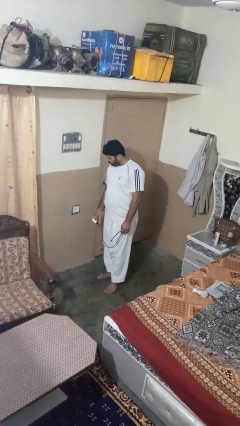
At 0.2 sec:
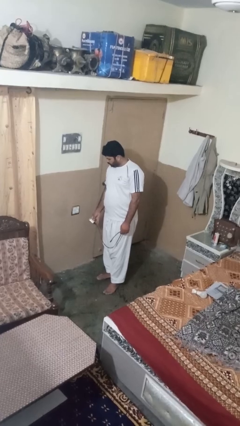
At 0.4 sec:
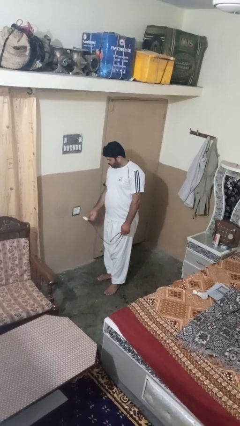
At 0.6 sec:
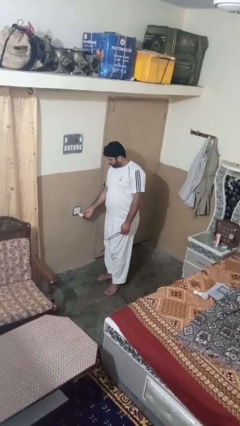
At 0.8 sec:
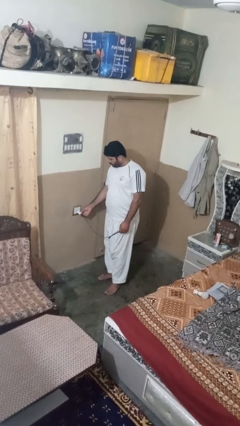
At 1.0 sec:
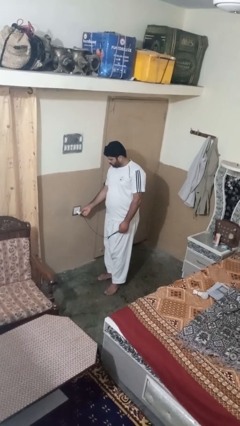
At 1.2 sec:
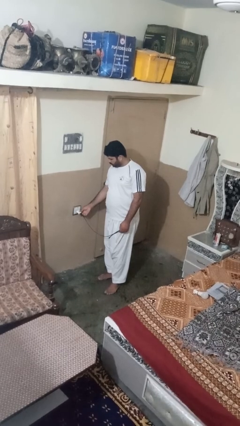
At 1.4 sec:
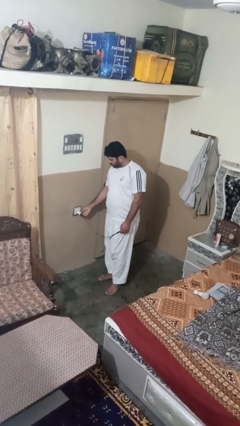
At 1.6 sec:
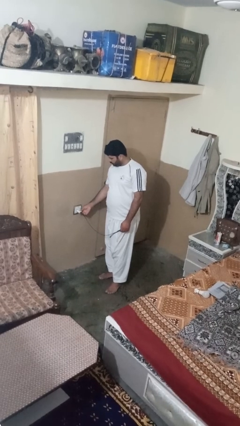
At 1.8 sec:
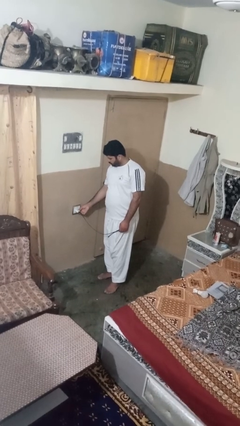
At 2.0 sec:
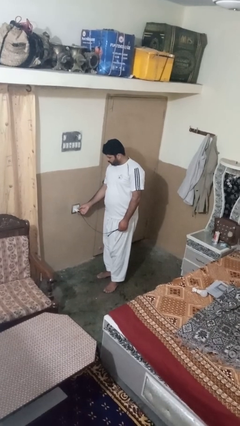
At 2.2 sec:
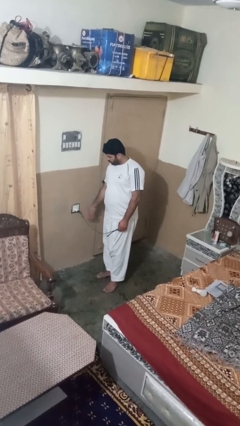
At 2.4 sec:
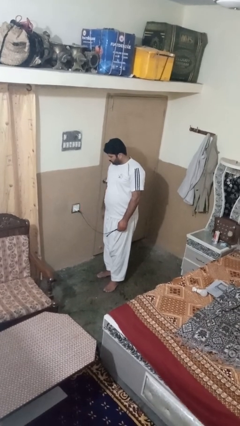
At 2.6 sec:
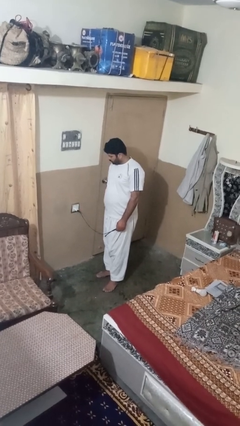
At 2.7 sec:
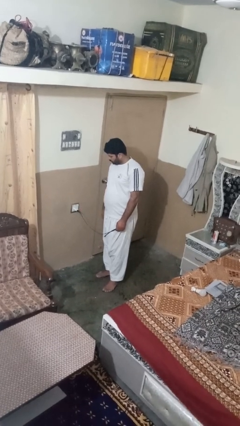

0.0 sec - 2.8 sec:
person plugs into electrical socket

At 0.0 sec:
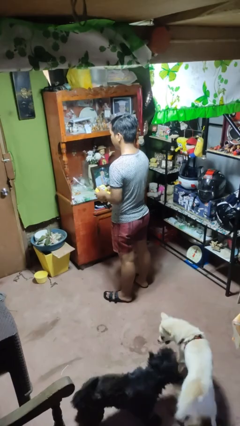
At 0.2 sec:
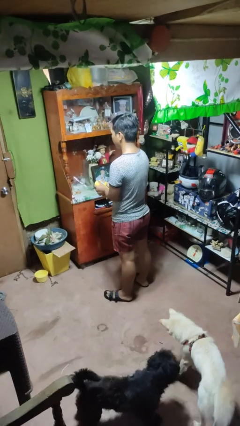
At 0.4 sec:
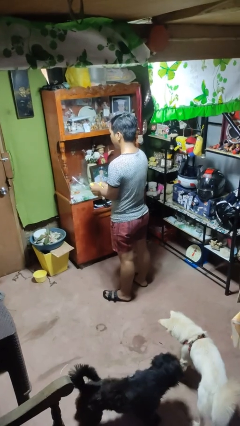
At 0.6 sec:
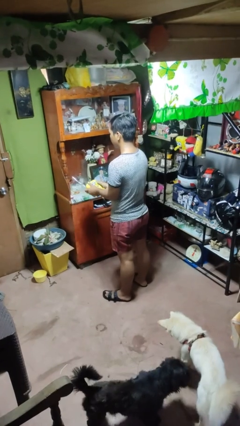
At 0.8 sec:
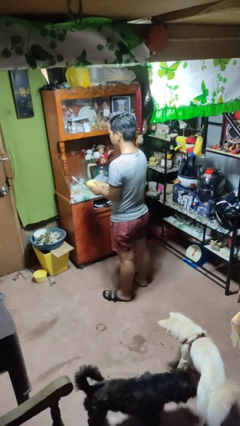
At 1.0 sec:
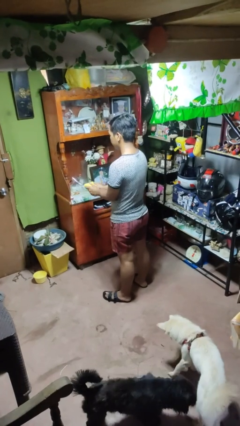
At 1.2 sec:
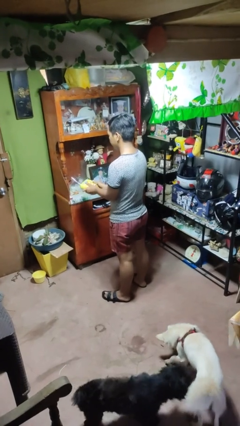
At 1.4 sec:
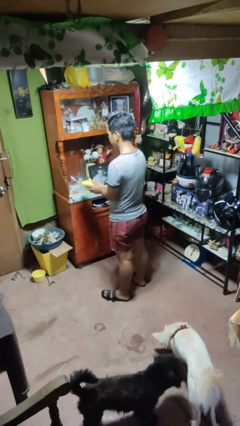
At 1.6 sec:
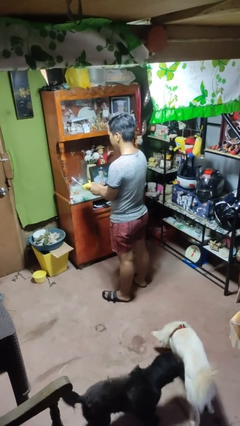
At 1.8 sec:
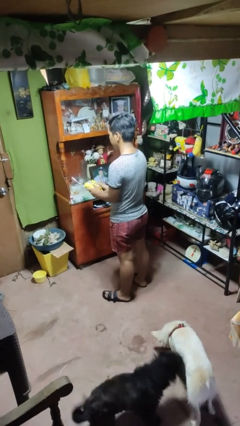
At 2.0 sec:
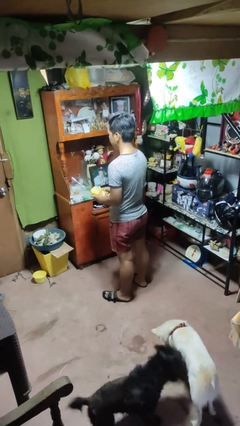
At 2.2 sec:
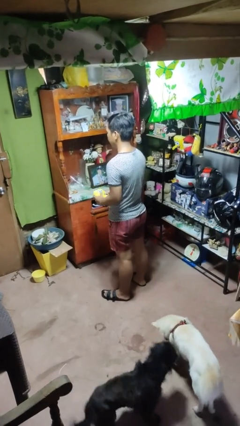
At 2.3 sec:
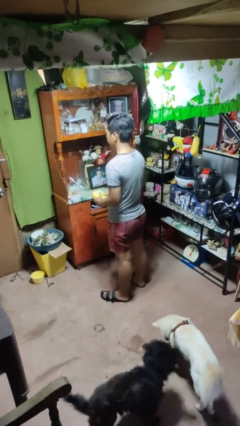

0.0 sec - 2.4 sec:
person squeezes object

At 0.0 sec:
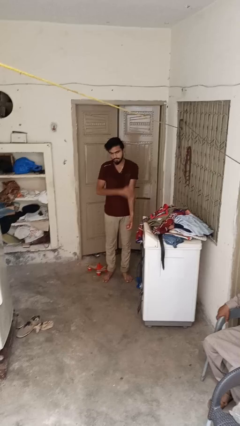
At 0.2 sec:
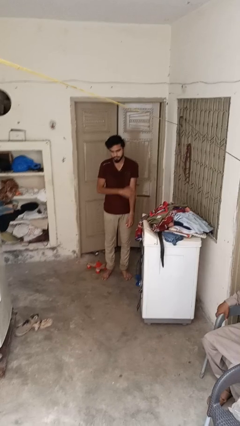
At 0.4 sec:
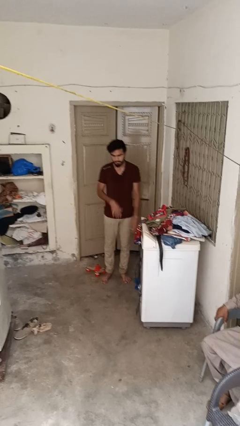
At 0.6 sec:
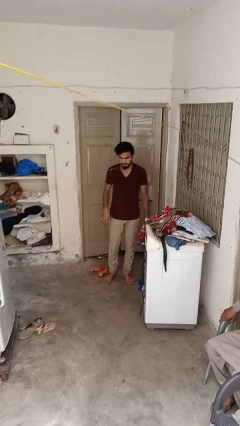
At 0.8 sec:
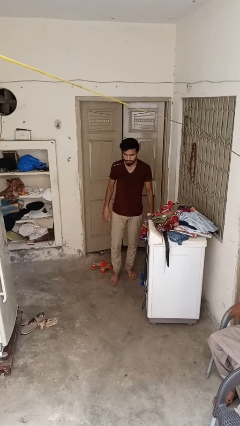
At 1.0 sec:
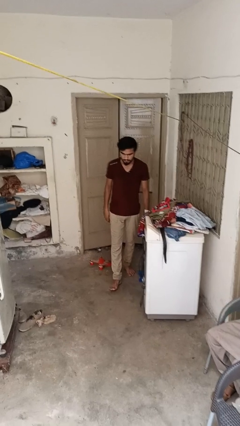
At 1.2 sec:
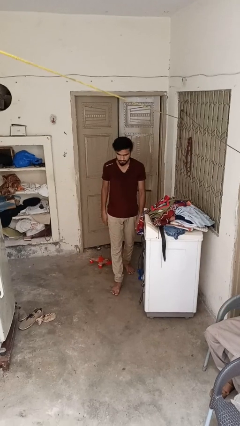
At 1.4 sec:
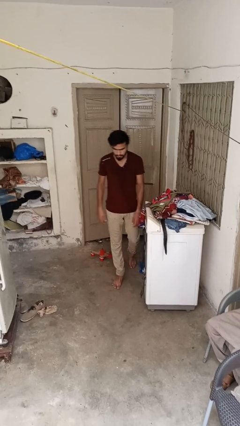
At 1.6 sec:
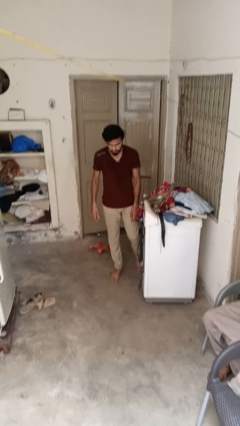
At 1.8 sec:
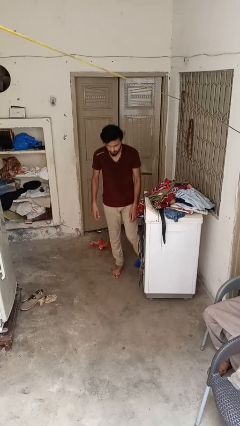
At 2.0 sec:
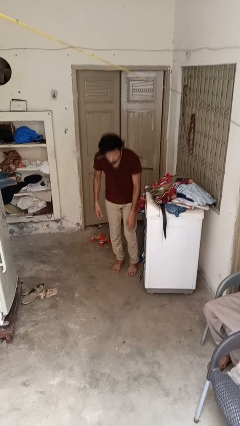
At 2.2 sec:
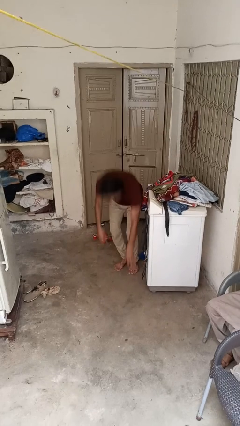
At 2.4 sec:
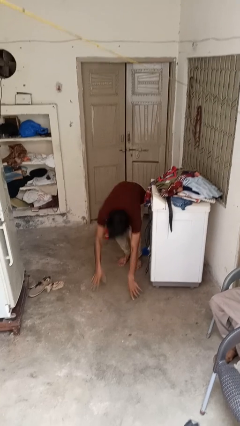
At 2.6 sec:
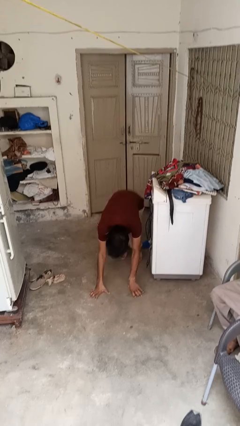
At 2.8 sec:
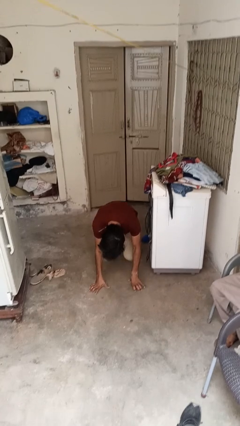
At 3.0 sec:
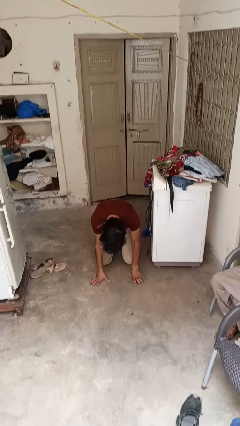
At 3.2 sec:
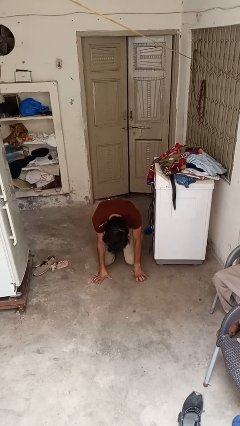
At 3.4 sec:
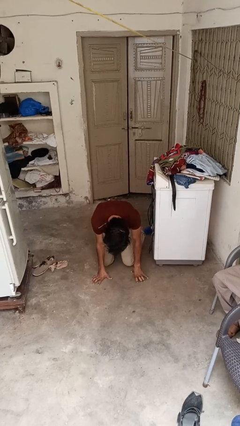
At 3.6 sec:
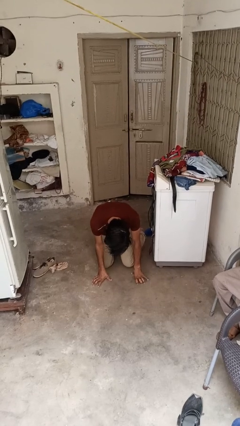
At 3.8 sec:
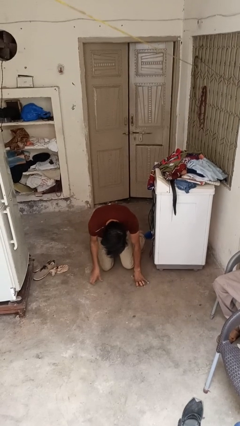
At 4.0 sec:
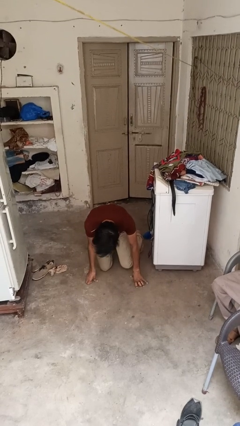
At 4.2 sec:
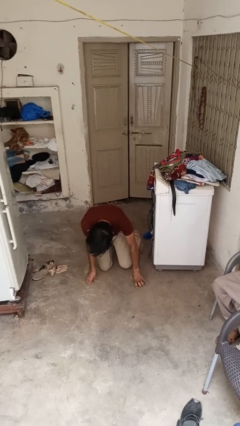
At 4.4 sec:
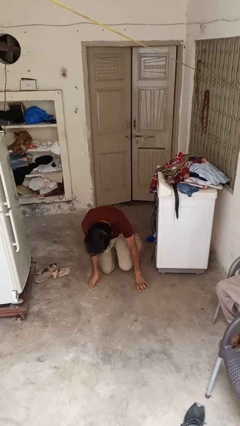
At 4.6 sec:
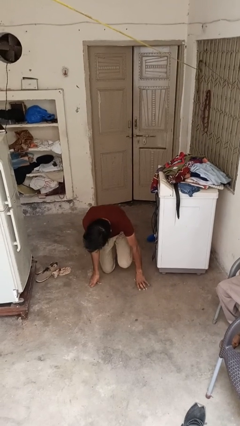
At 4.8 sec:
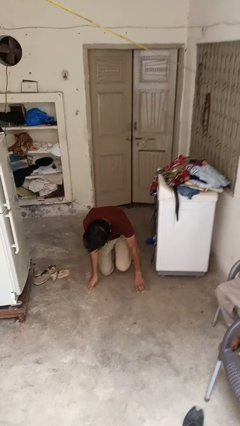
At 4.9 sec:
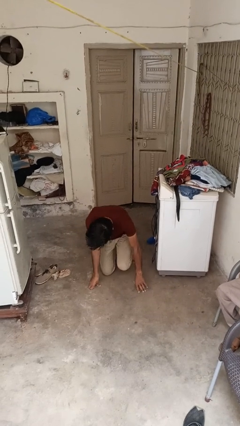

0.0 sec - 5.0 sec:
person trips on object on floor

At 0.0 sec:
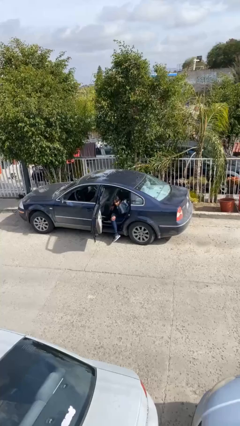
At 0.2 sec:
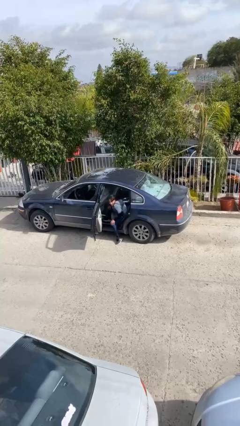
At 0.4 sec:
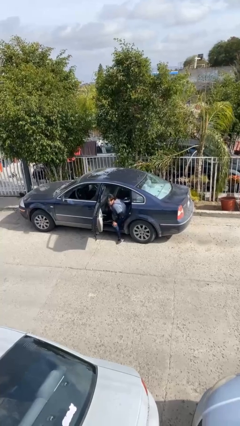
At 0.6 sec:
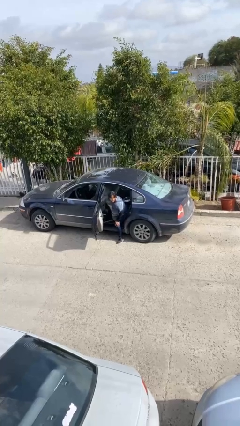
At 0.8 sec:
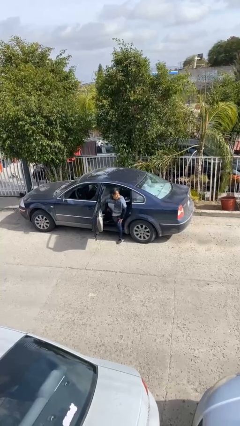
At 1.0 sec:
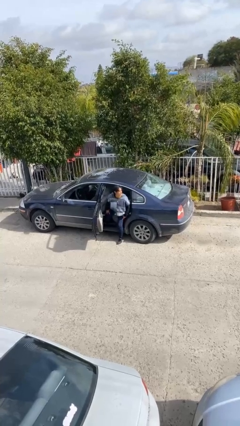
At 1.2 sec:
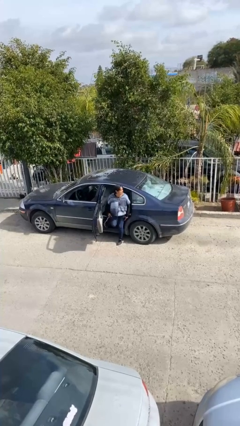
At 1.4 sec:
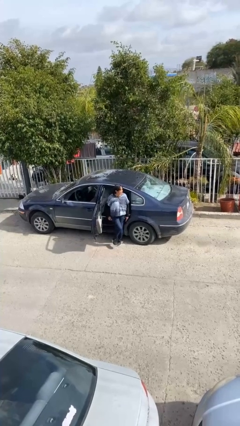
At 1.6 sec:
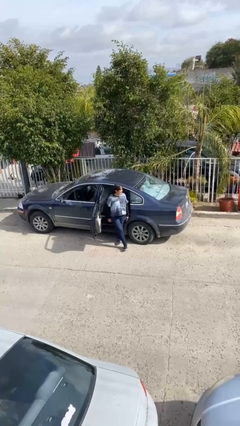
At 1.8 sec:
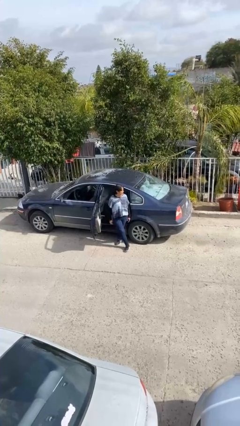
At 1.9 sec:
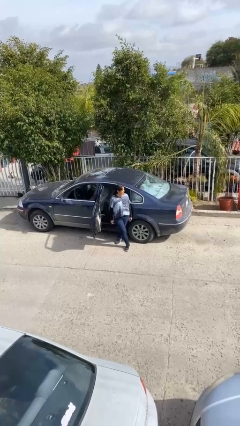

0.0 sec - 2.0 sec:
person exits car

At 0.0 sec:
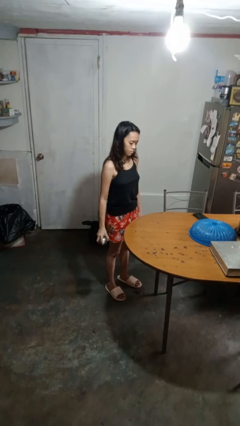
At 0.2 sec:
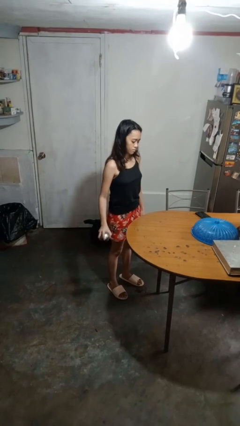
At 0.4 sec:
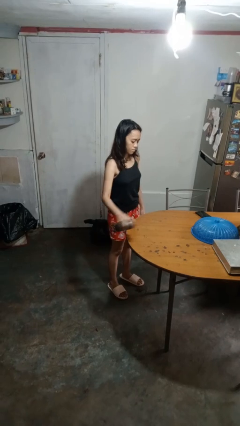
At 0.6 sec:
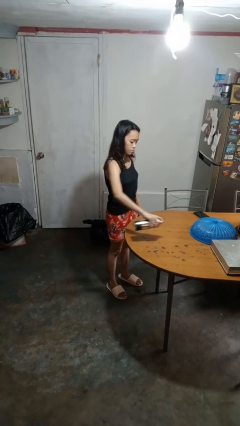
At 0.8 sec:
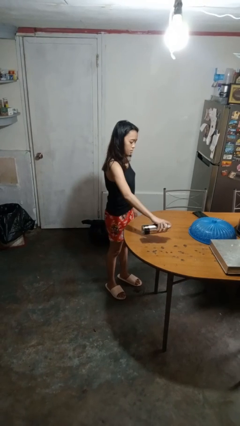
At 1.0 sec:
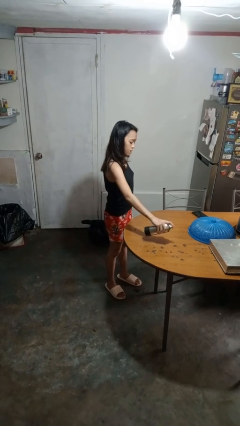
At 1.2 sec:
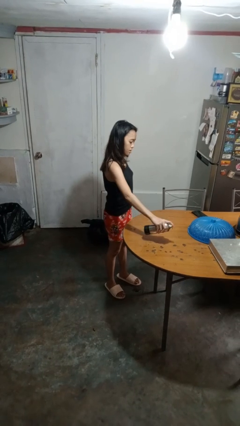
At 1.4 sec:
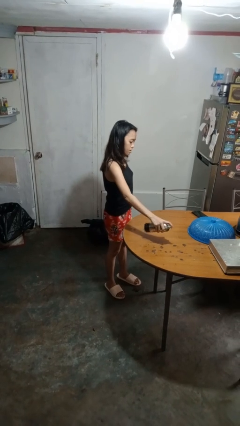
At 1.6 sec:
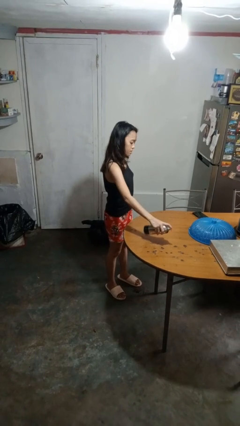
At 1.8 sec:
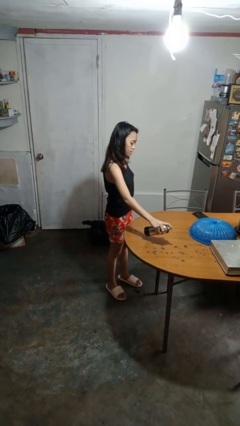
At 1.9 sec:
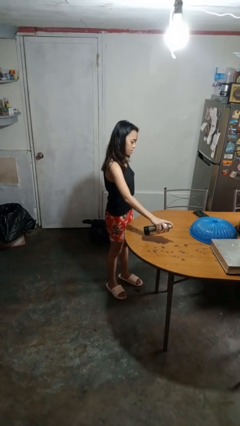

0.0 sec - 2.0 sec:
person sprays from bottle

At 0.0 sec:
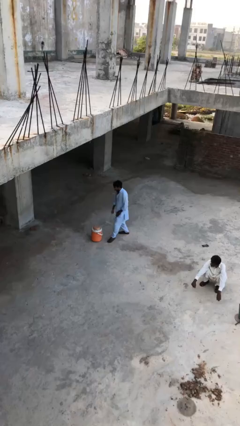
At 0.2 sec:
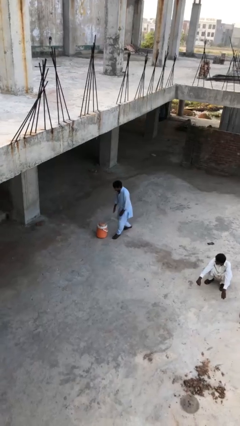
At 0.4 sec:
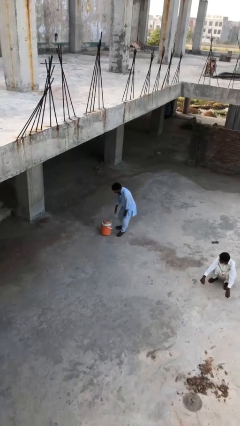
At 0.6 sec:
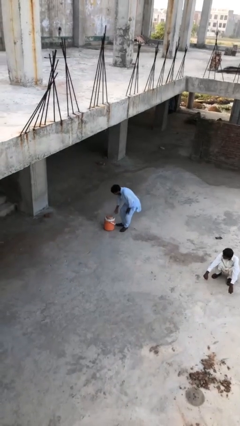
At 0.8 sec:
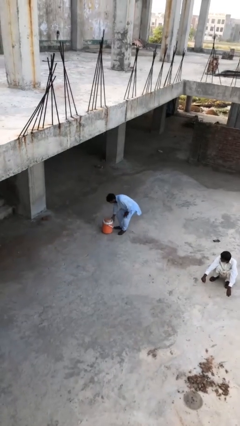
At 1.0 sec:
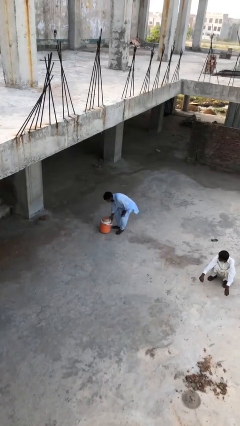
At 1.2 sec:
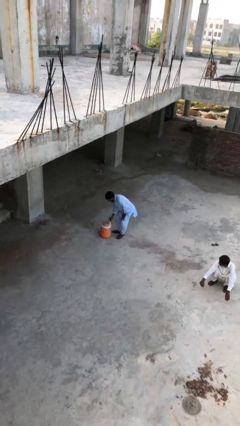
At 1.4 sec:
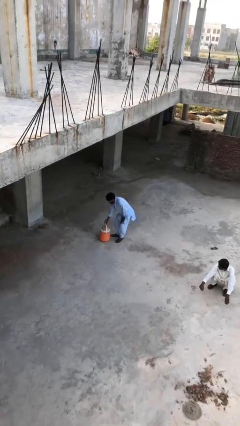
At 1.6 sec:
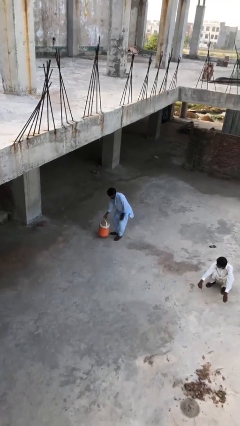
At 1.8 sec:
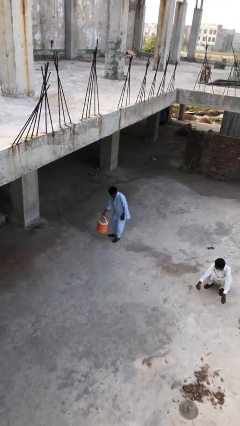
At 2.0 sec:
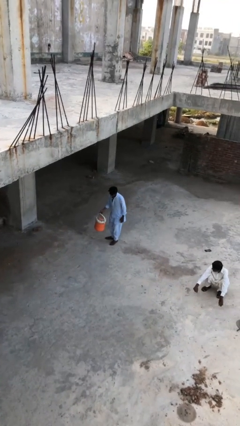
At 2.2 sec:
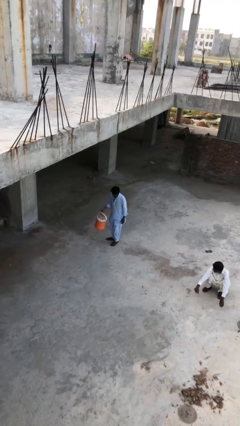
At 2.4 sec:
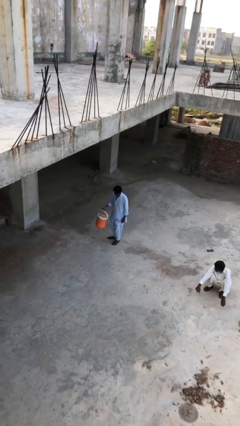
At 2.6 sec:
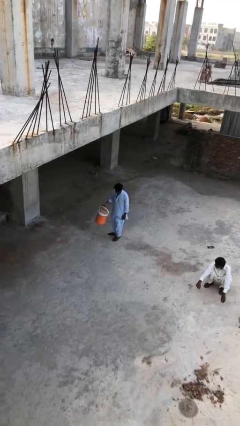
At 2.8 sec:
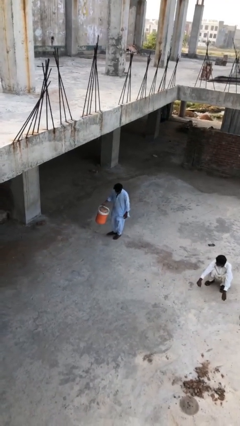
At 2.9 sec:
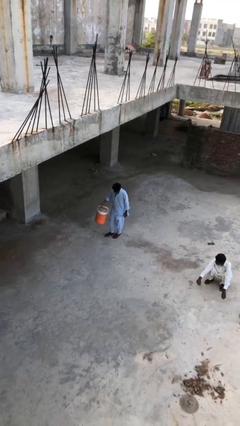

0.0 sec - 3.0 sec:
person picks up object from floor
